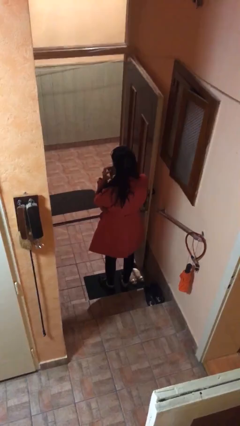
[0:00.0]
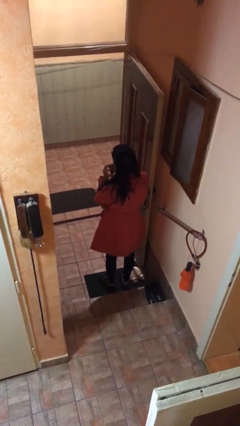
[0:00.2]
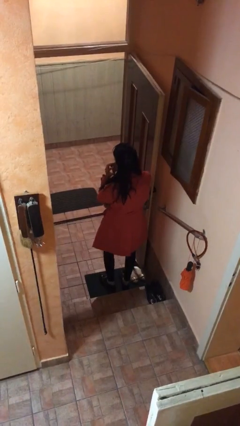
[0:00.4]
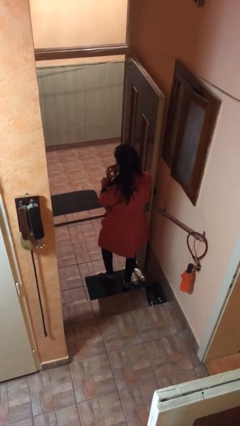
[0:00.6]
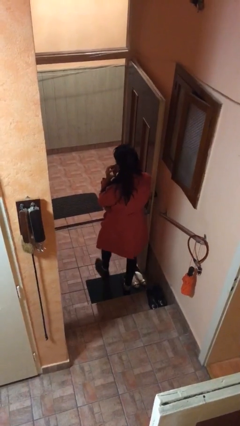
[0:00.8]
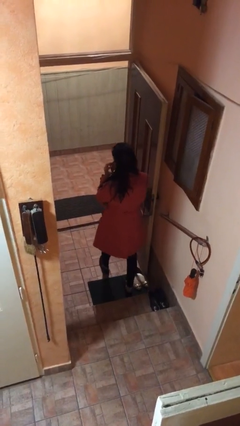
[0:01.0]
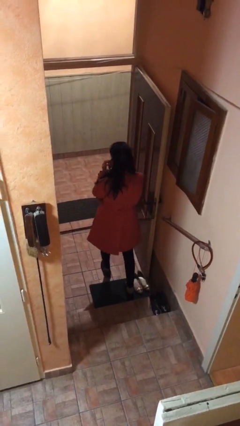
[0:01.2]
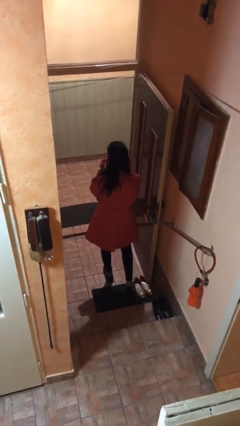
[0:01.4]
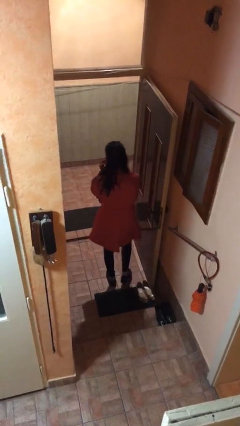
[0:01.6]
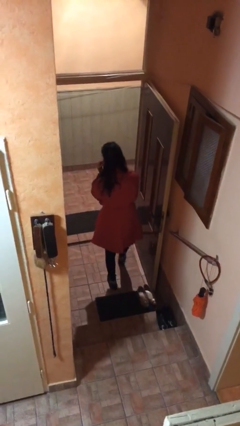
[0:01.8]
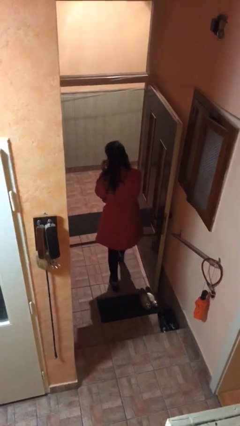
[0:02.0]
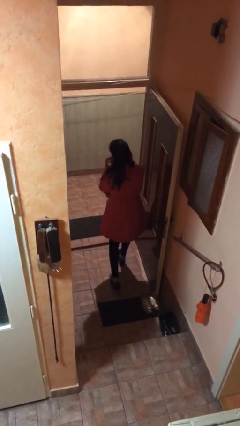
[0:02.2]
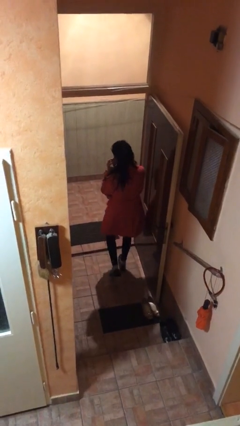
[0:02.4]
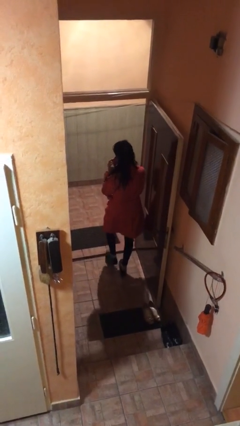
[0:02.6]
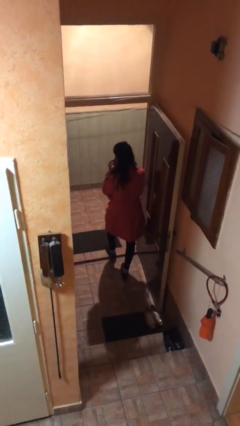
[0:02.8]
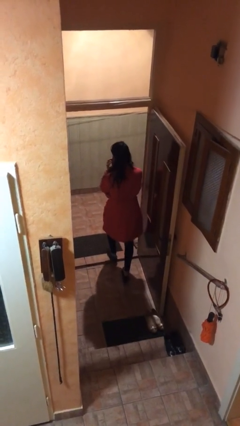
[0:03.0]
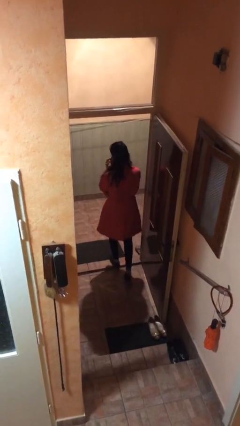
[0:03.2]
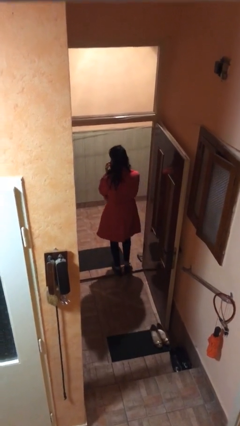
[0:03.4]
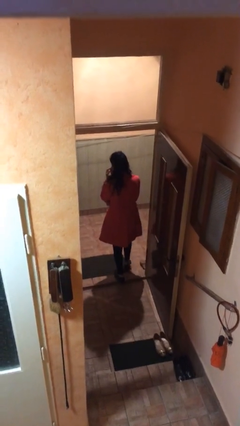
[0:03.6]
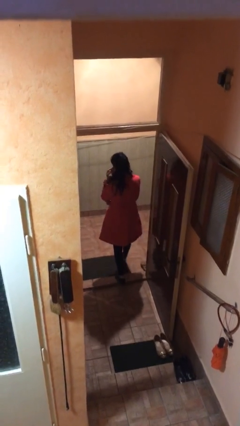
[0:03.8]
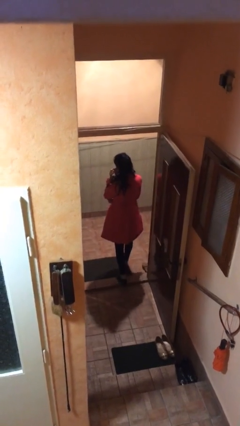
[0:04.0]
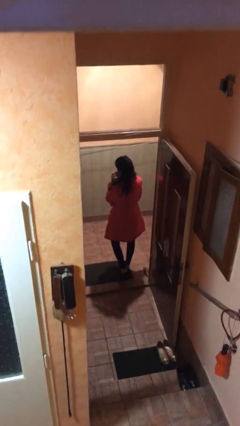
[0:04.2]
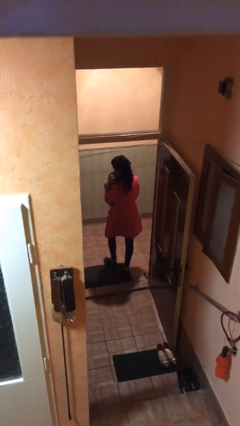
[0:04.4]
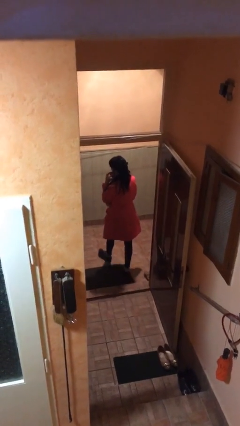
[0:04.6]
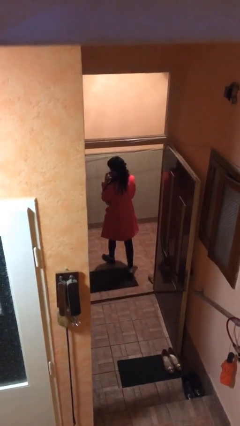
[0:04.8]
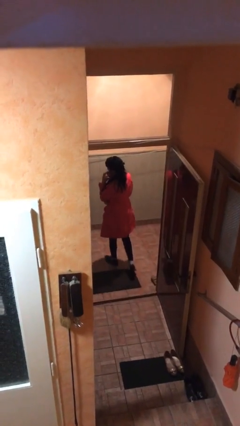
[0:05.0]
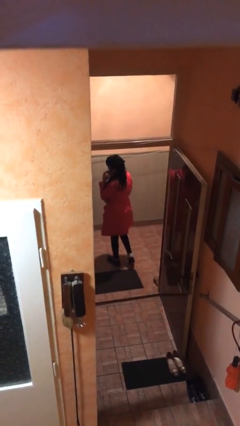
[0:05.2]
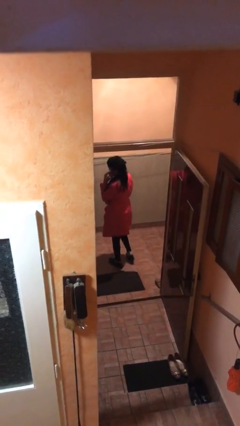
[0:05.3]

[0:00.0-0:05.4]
person exits scene through structure

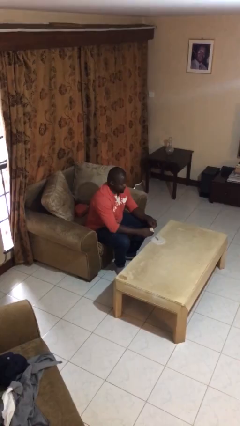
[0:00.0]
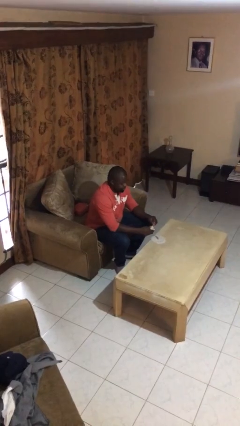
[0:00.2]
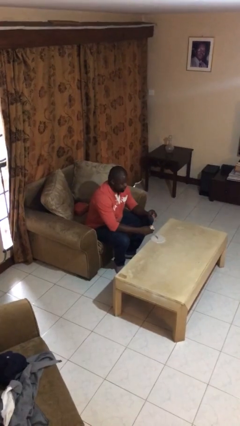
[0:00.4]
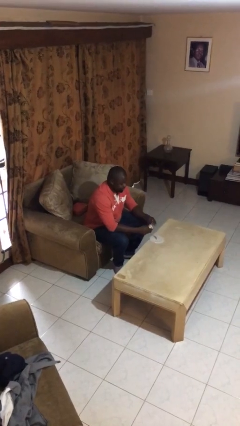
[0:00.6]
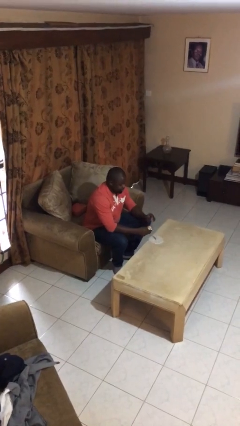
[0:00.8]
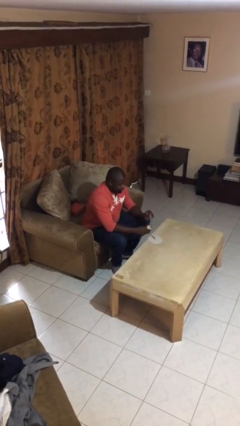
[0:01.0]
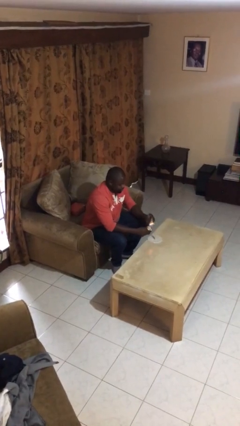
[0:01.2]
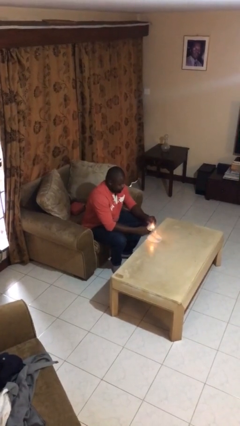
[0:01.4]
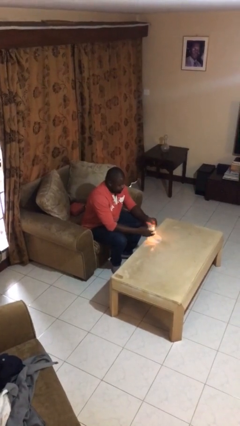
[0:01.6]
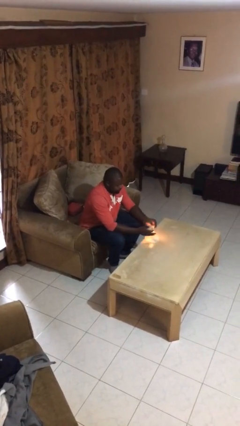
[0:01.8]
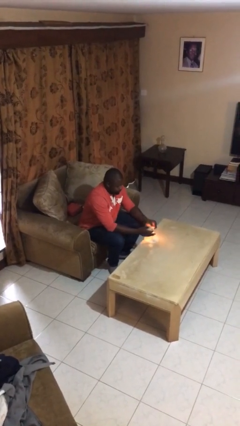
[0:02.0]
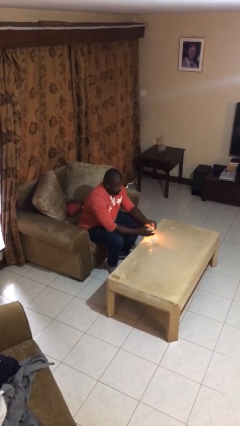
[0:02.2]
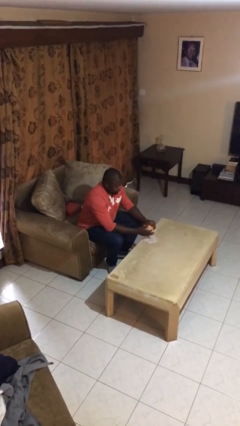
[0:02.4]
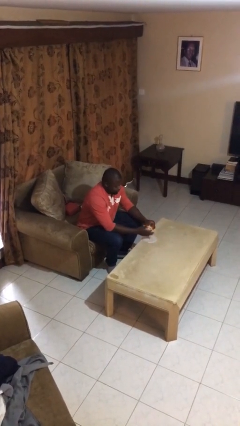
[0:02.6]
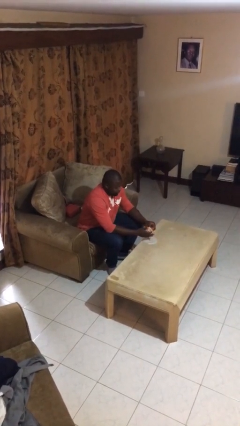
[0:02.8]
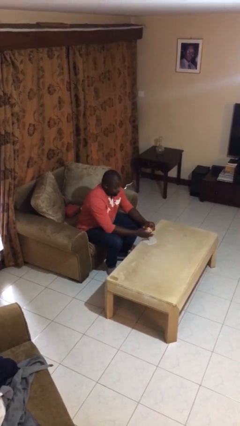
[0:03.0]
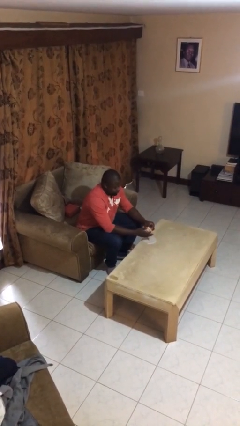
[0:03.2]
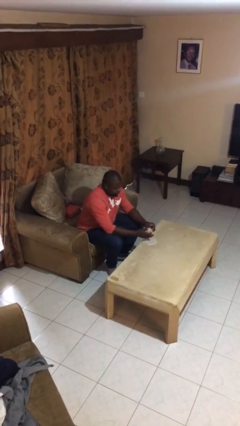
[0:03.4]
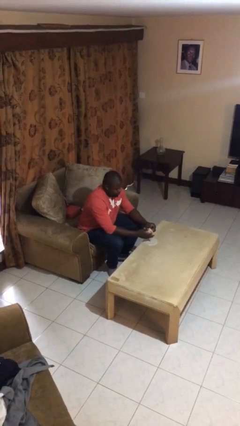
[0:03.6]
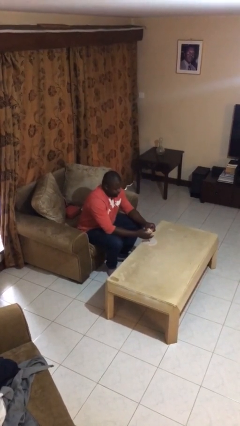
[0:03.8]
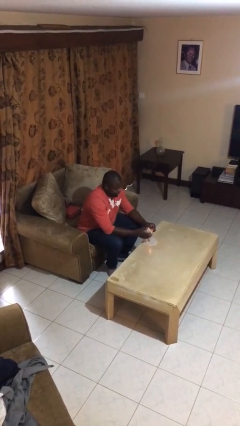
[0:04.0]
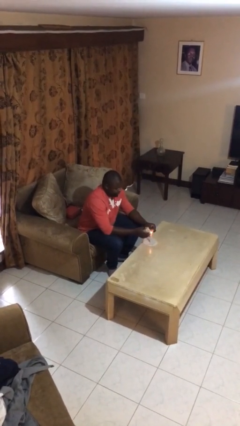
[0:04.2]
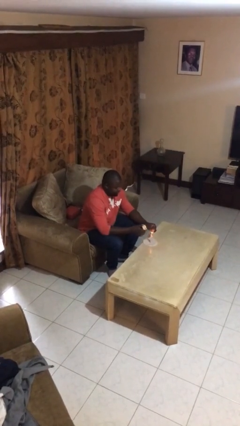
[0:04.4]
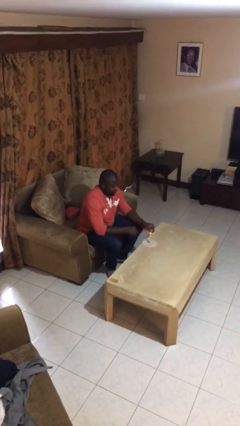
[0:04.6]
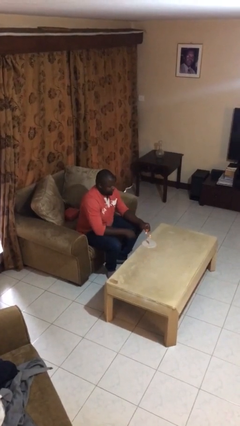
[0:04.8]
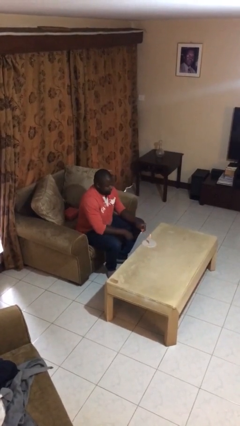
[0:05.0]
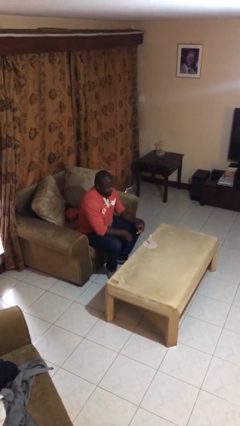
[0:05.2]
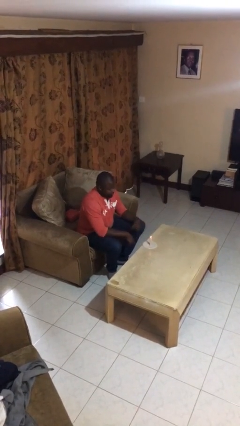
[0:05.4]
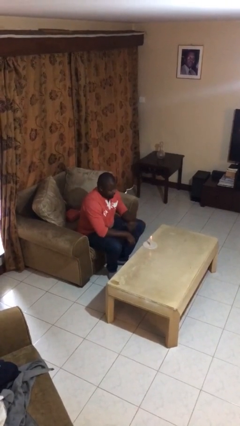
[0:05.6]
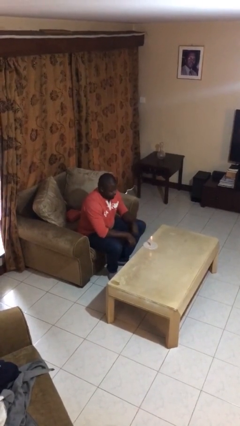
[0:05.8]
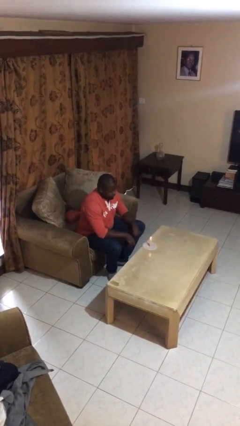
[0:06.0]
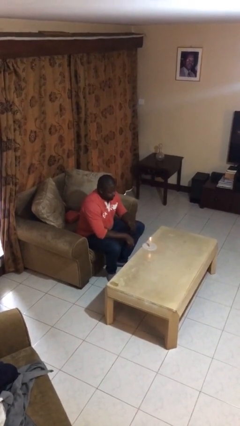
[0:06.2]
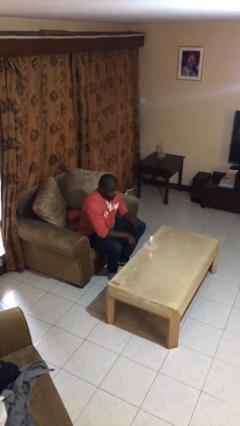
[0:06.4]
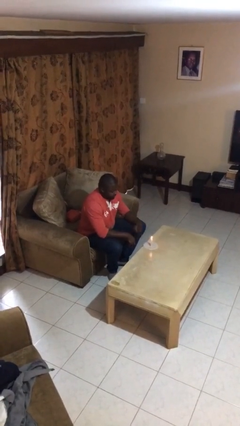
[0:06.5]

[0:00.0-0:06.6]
person lights candle

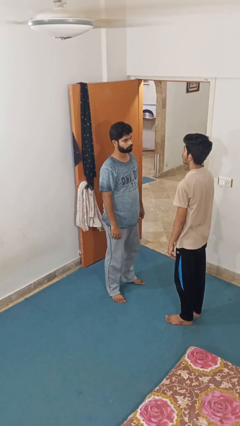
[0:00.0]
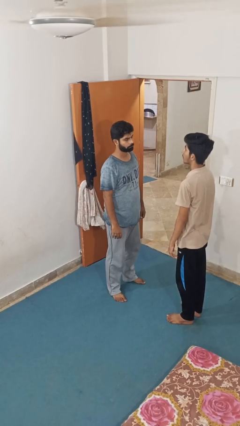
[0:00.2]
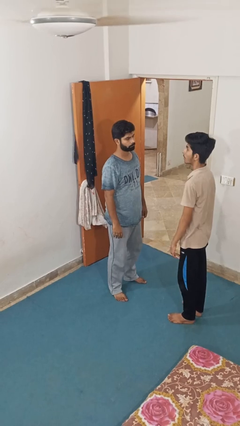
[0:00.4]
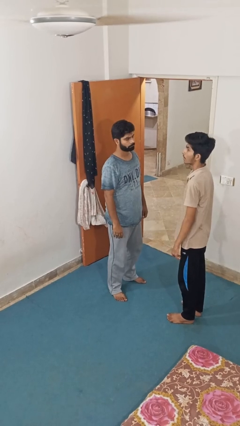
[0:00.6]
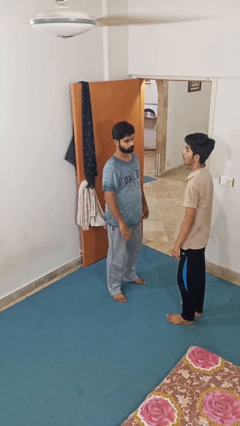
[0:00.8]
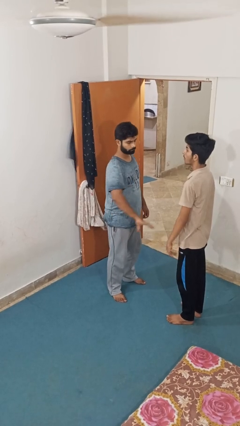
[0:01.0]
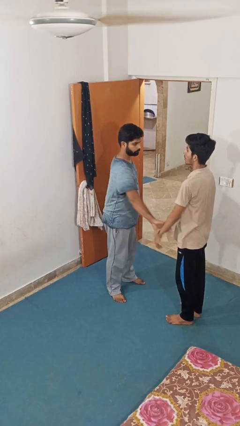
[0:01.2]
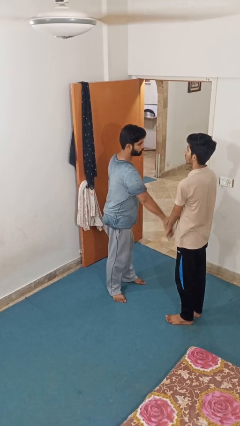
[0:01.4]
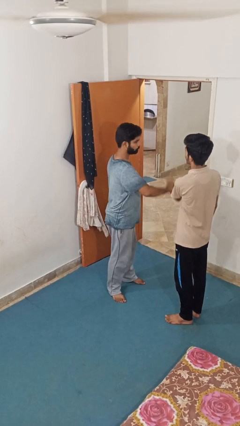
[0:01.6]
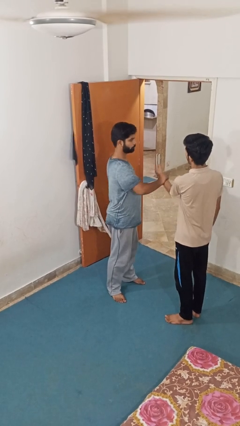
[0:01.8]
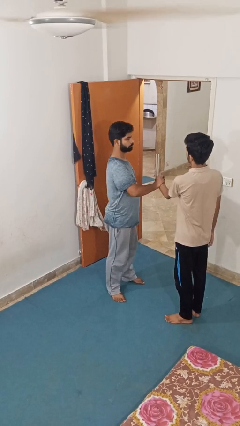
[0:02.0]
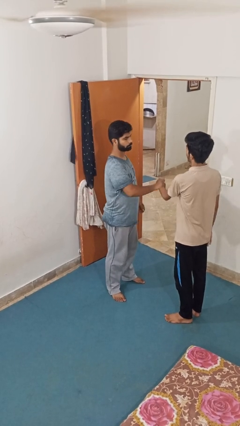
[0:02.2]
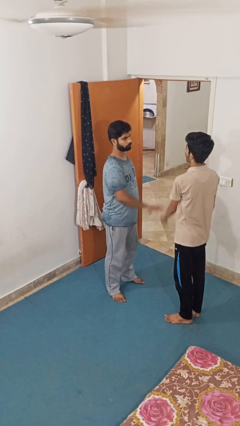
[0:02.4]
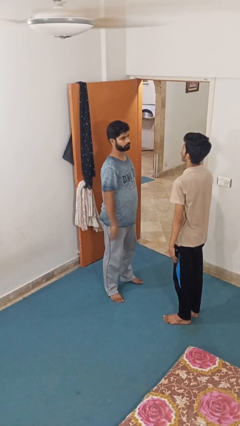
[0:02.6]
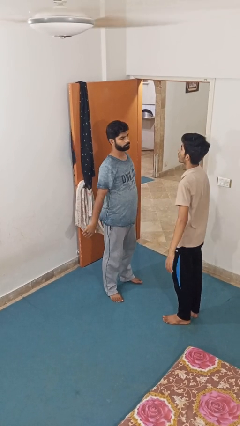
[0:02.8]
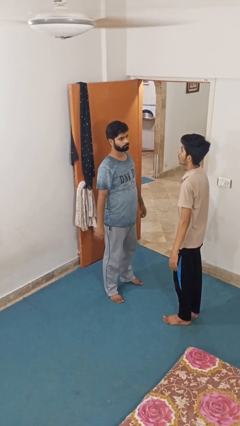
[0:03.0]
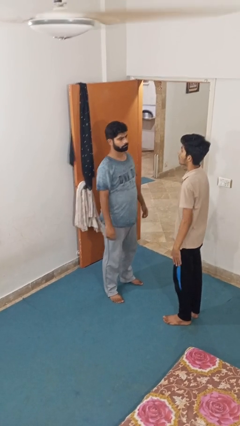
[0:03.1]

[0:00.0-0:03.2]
person grabs person by forearm

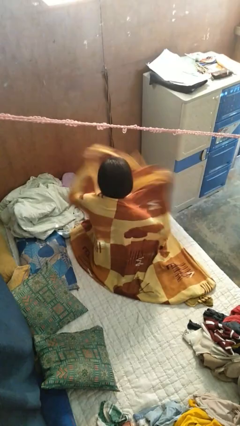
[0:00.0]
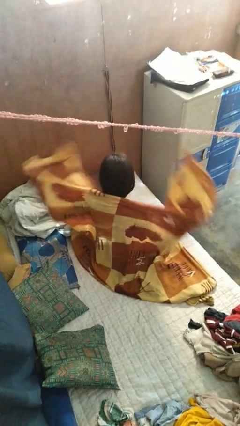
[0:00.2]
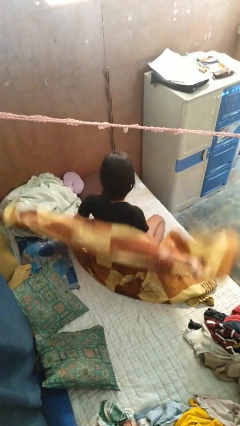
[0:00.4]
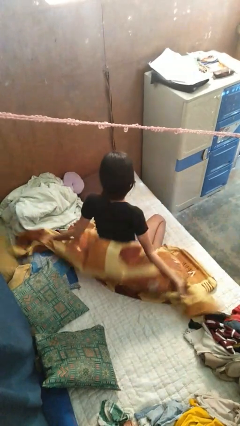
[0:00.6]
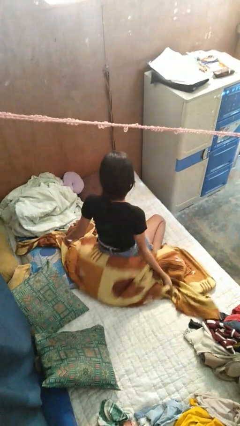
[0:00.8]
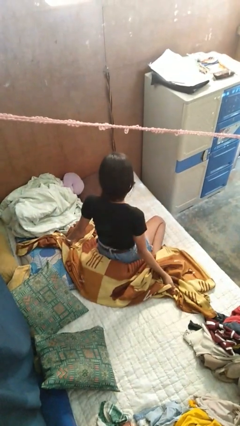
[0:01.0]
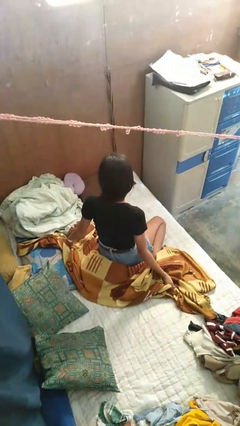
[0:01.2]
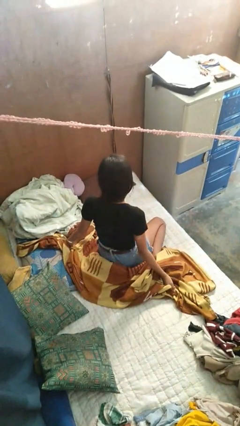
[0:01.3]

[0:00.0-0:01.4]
person uncovers with blanket

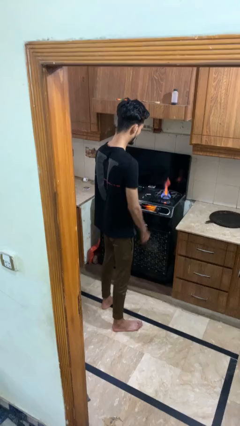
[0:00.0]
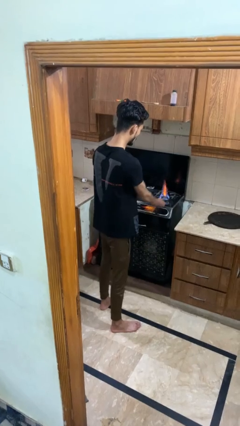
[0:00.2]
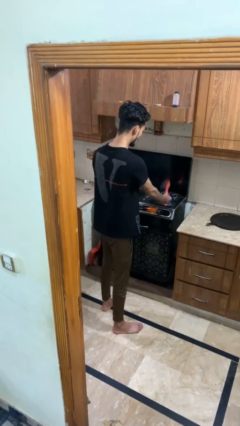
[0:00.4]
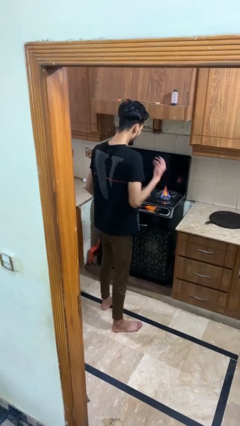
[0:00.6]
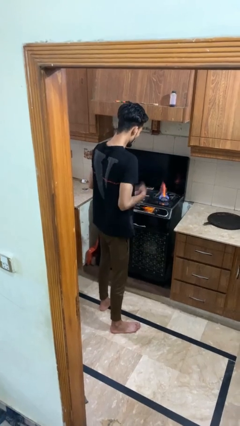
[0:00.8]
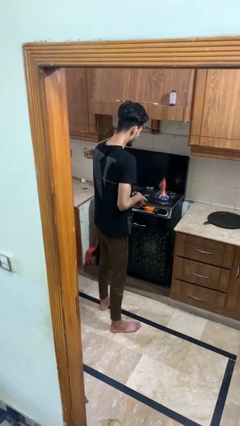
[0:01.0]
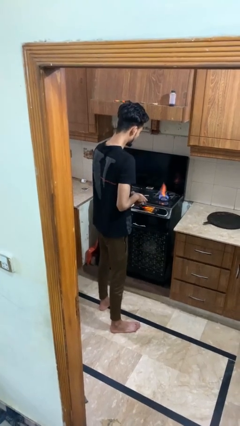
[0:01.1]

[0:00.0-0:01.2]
person burns hand
